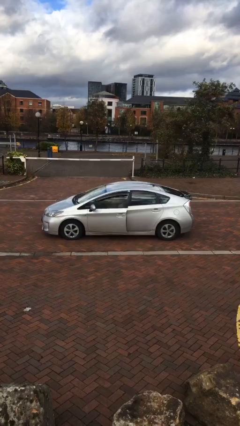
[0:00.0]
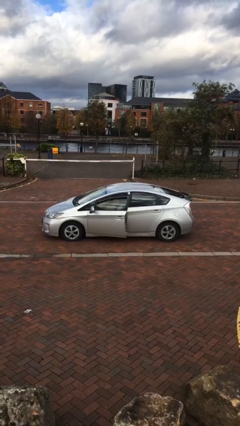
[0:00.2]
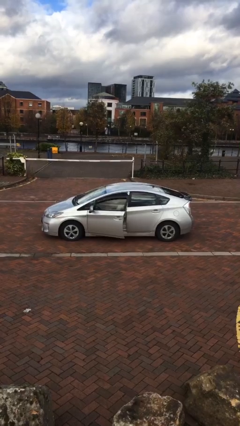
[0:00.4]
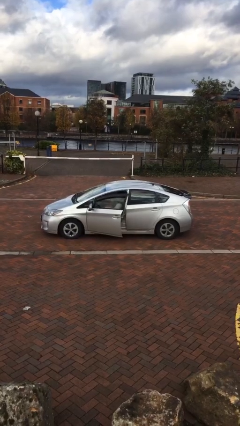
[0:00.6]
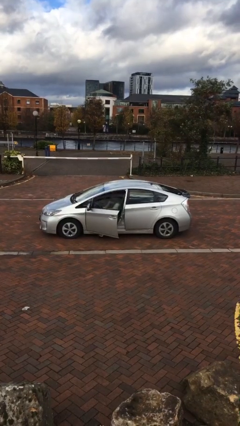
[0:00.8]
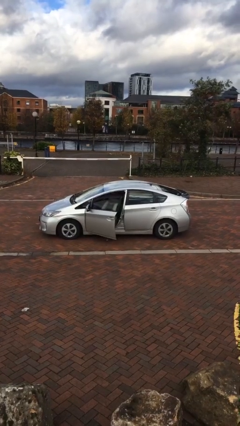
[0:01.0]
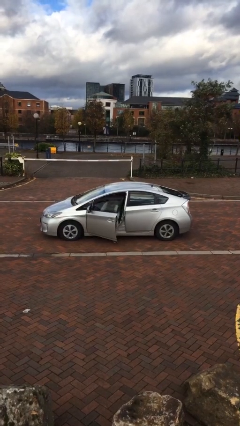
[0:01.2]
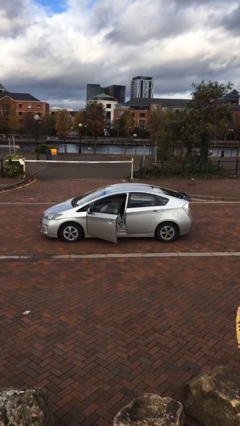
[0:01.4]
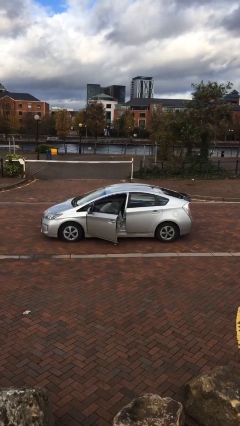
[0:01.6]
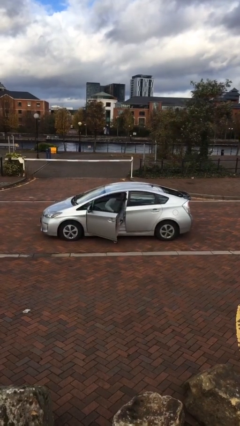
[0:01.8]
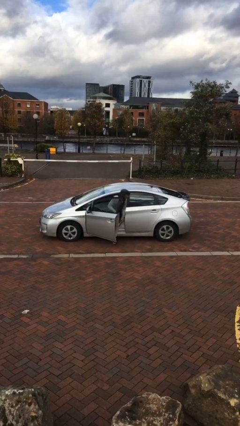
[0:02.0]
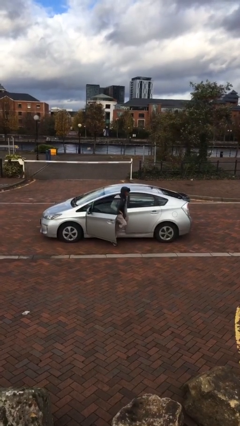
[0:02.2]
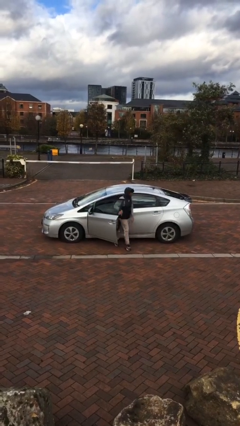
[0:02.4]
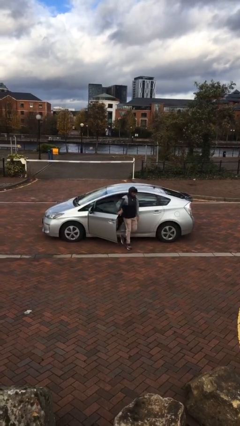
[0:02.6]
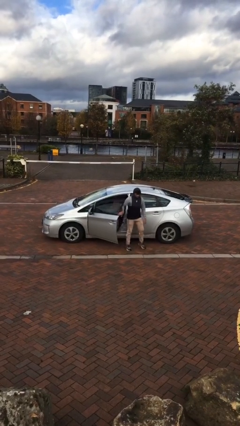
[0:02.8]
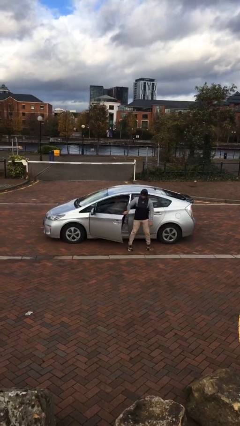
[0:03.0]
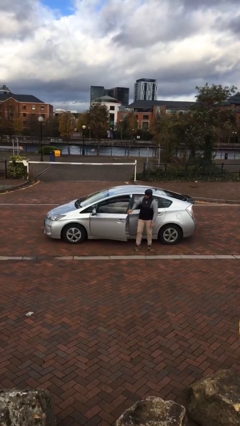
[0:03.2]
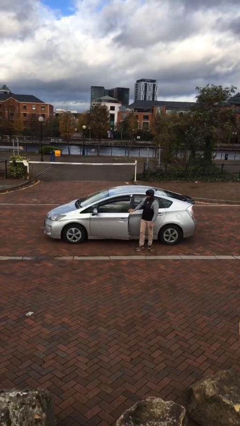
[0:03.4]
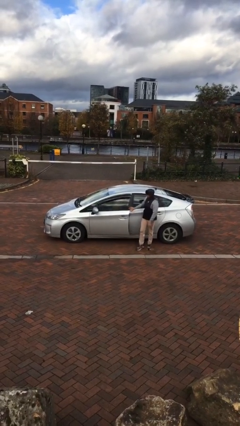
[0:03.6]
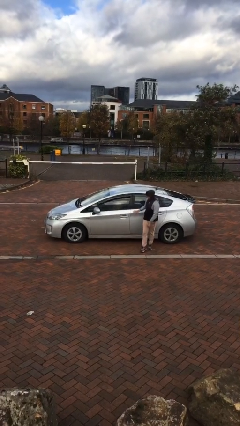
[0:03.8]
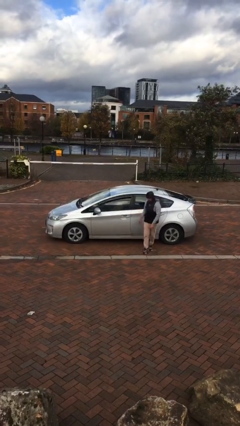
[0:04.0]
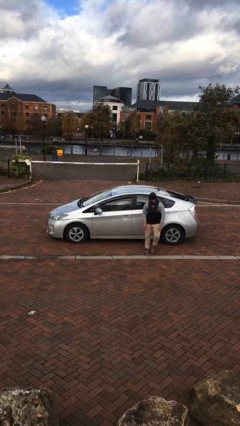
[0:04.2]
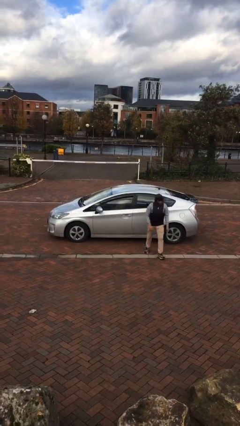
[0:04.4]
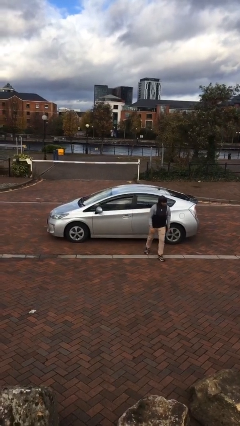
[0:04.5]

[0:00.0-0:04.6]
car drops off person

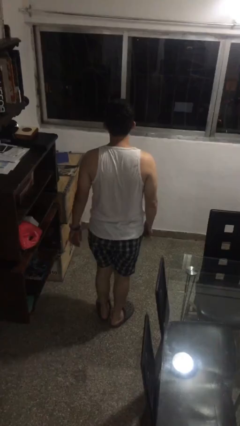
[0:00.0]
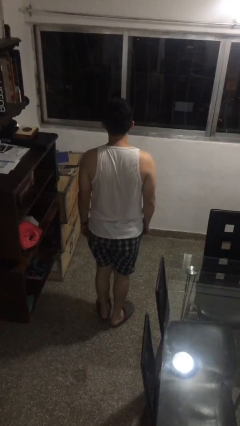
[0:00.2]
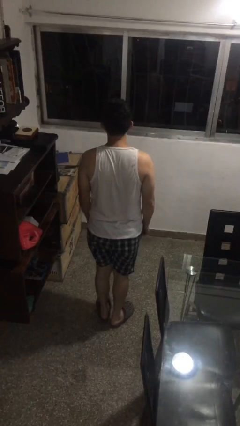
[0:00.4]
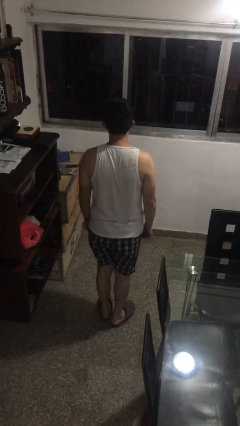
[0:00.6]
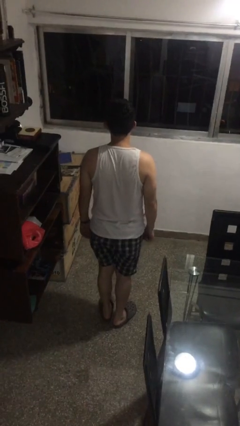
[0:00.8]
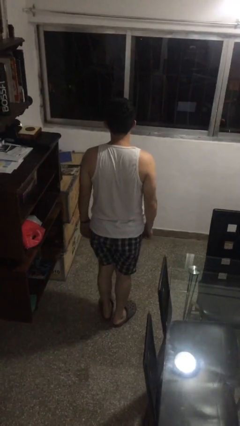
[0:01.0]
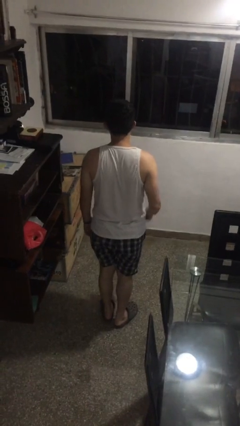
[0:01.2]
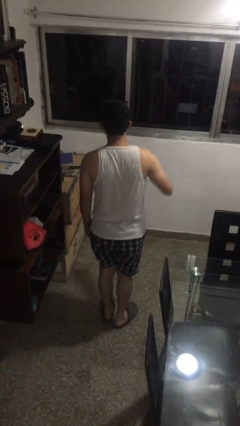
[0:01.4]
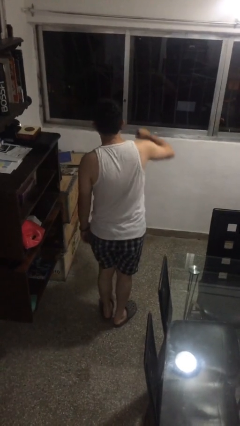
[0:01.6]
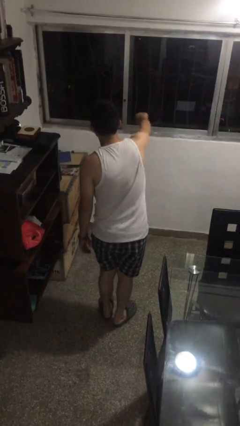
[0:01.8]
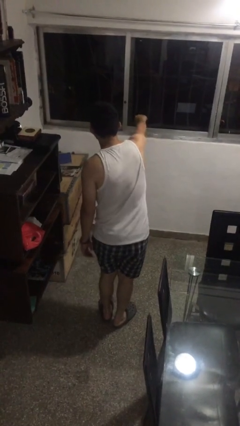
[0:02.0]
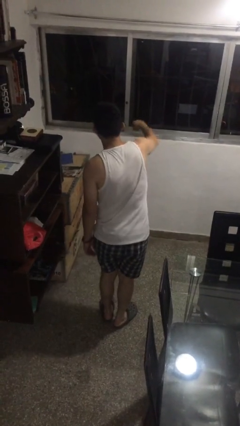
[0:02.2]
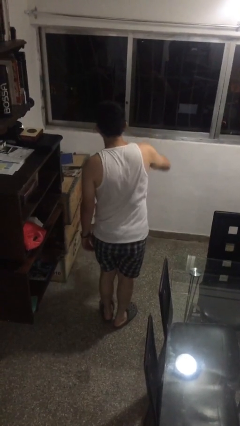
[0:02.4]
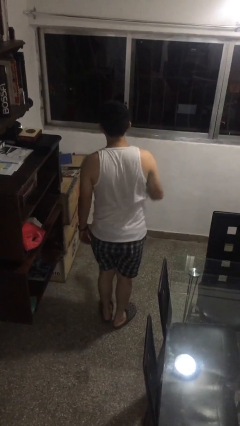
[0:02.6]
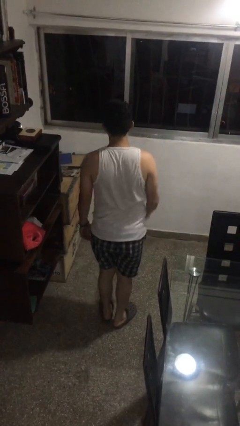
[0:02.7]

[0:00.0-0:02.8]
person karate chop

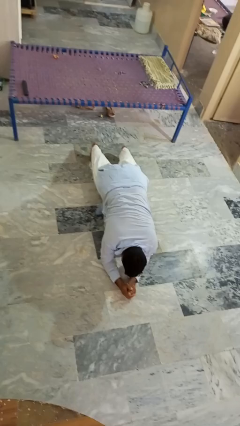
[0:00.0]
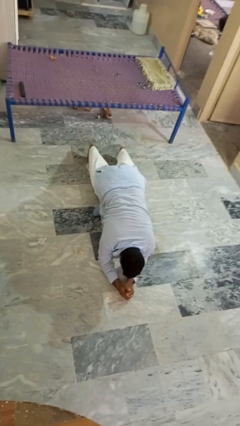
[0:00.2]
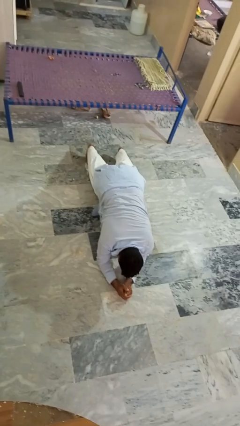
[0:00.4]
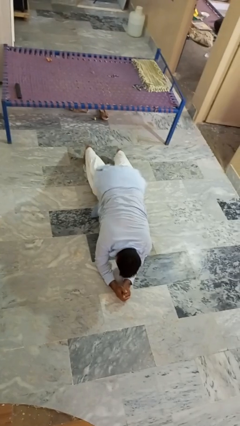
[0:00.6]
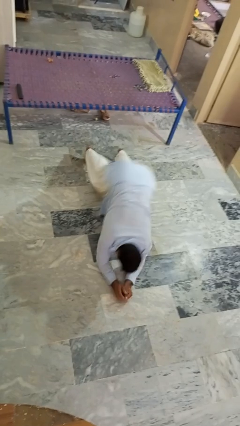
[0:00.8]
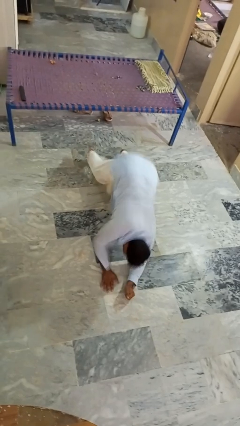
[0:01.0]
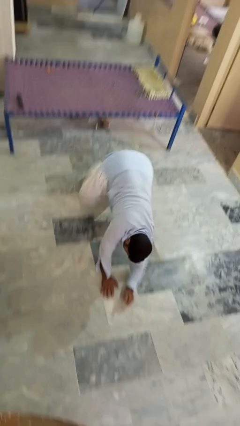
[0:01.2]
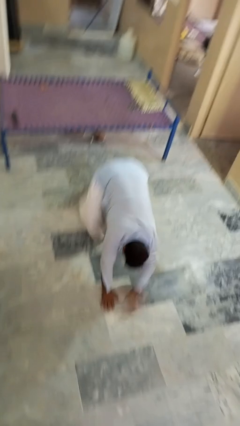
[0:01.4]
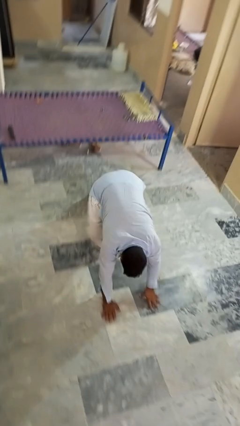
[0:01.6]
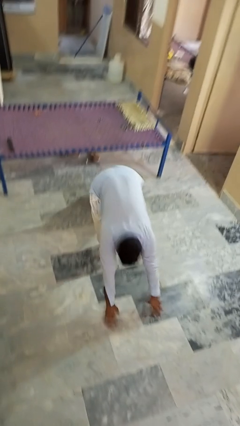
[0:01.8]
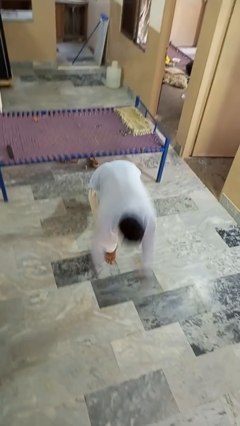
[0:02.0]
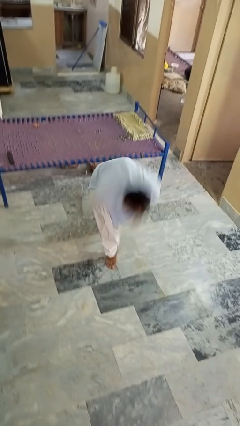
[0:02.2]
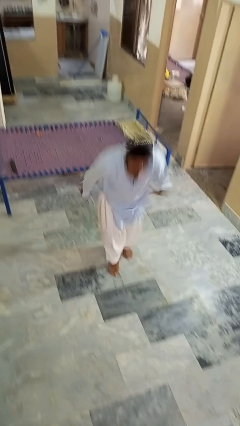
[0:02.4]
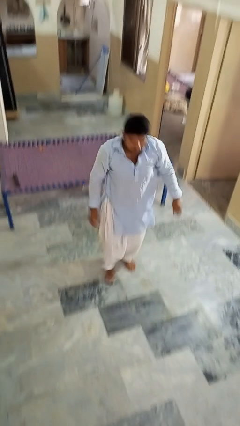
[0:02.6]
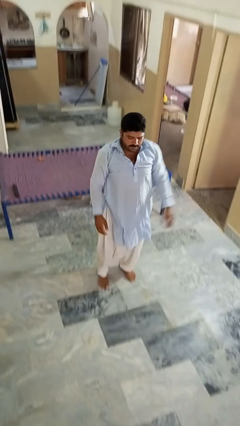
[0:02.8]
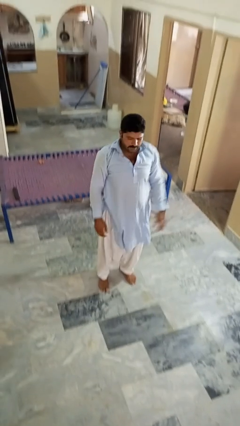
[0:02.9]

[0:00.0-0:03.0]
person stands up from floor

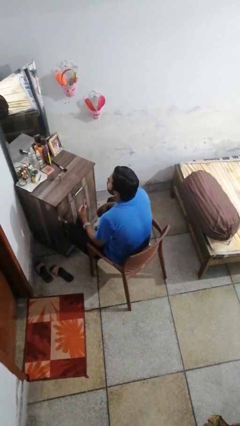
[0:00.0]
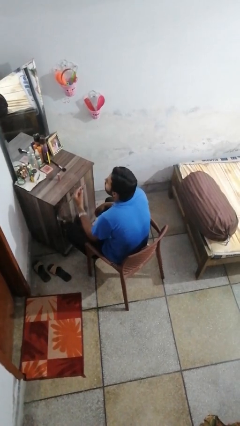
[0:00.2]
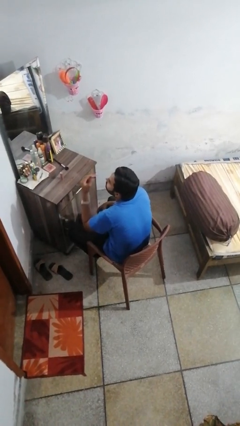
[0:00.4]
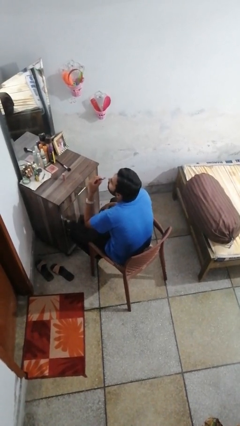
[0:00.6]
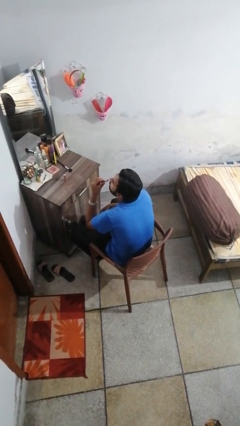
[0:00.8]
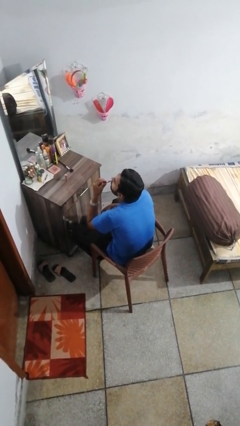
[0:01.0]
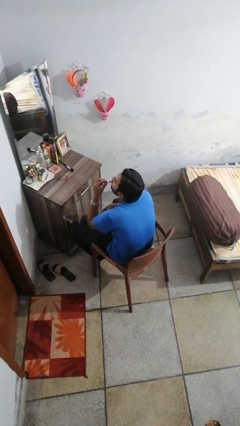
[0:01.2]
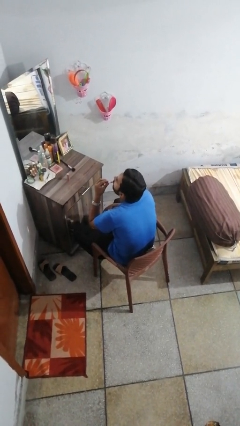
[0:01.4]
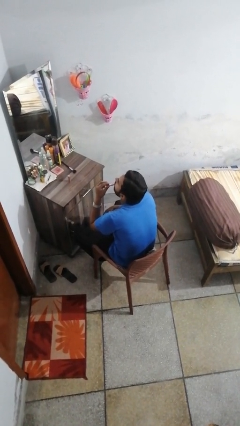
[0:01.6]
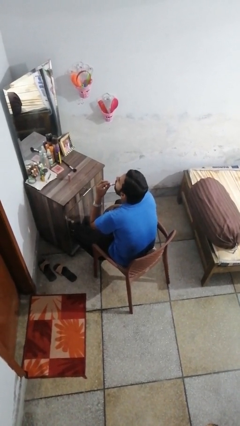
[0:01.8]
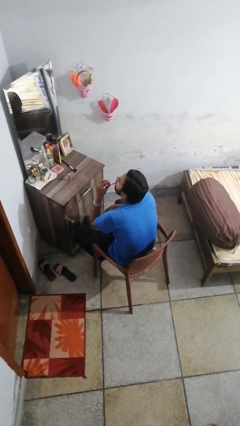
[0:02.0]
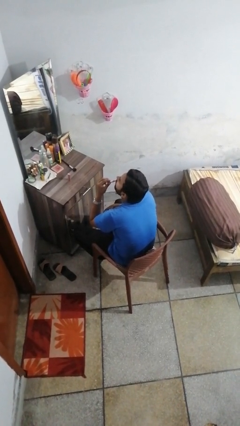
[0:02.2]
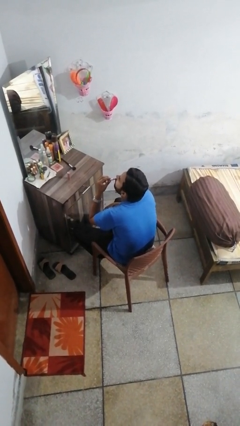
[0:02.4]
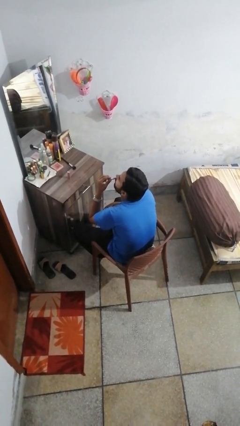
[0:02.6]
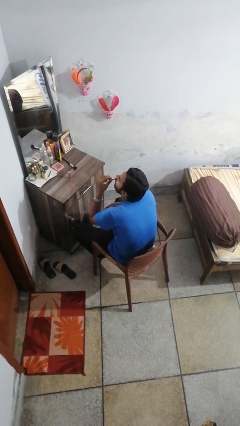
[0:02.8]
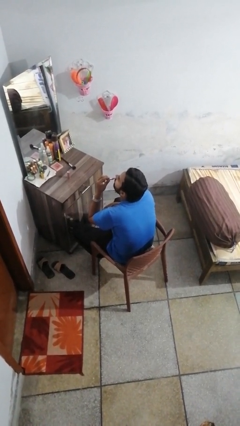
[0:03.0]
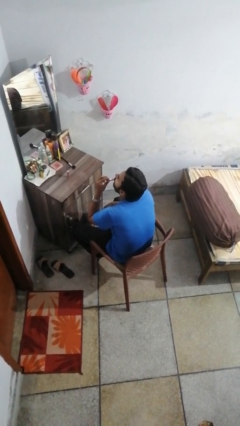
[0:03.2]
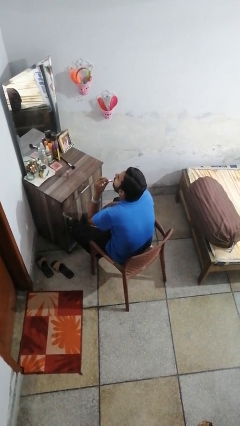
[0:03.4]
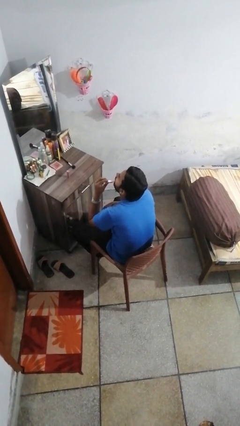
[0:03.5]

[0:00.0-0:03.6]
person applies lip makeup

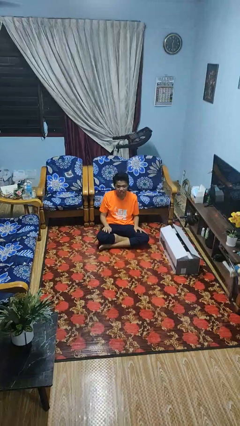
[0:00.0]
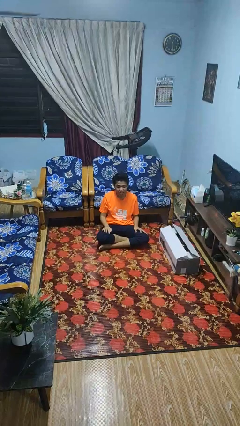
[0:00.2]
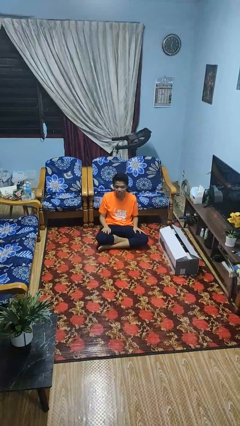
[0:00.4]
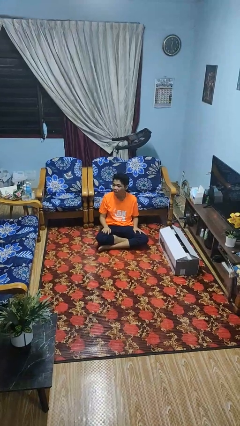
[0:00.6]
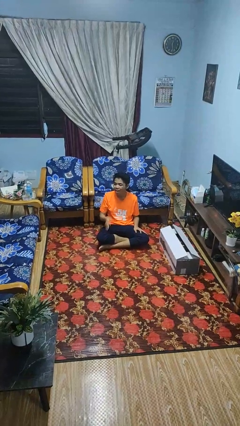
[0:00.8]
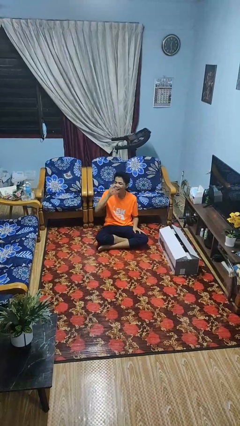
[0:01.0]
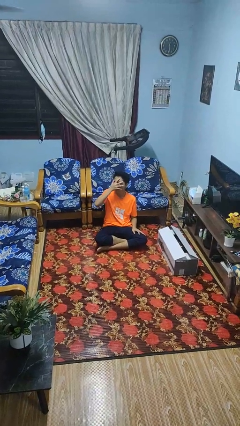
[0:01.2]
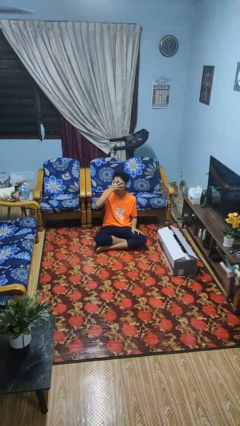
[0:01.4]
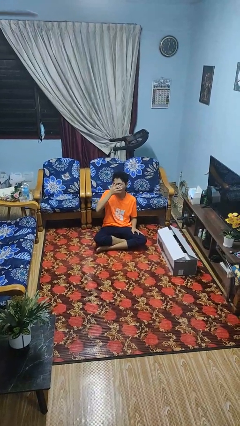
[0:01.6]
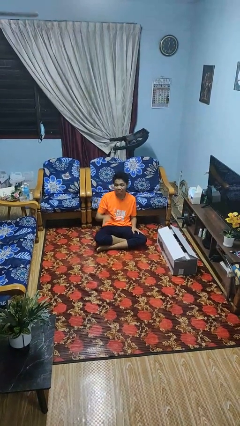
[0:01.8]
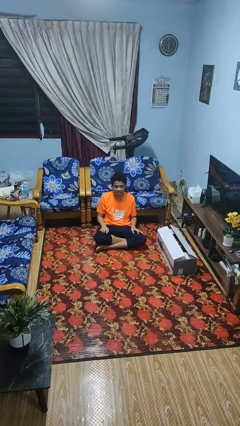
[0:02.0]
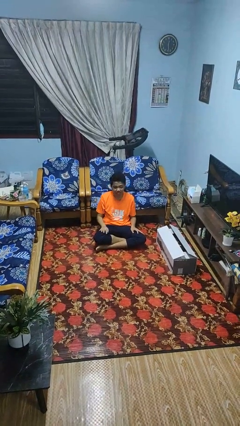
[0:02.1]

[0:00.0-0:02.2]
person covers face with hands

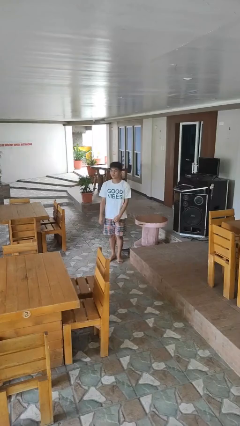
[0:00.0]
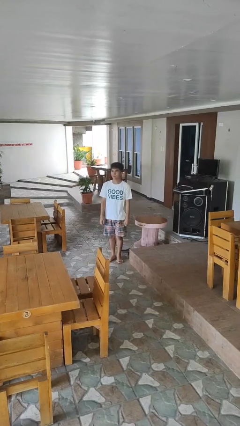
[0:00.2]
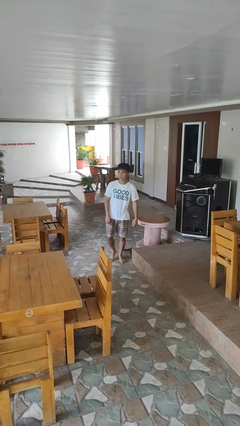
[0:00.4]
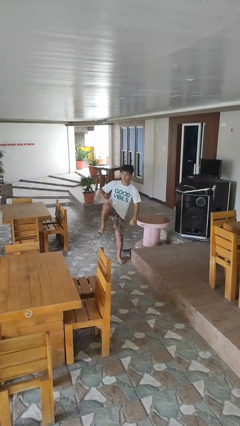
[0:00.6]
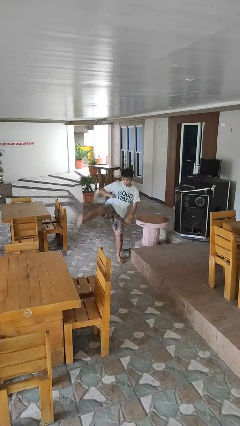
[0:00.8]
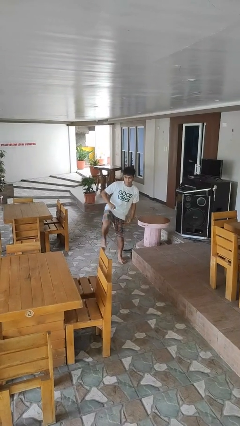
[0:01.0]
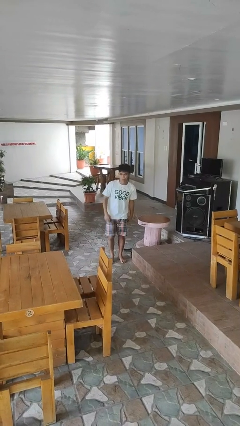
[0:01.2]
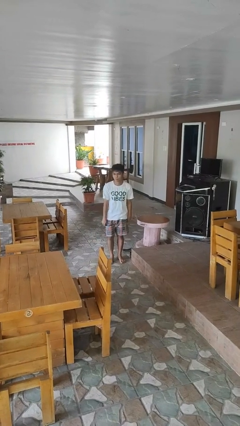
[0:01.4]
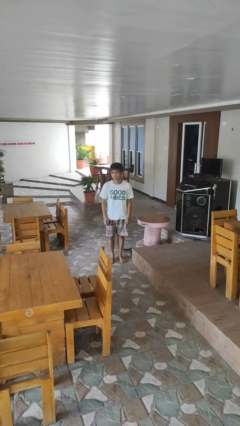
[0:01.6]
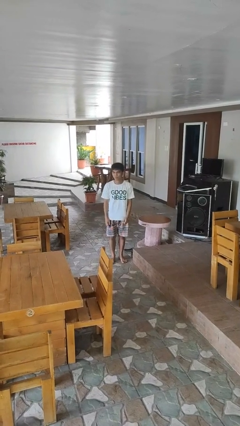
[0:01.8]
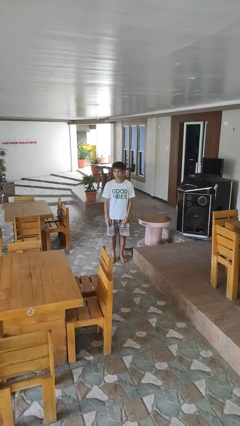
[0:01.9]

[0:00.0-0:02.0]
person karate kicks
